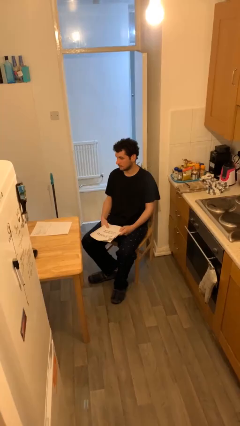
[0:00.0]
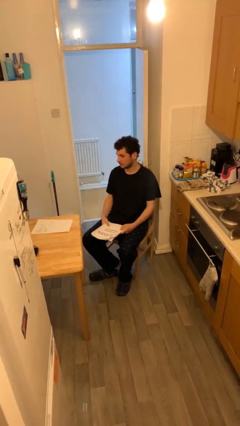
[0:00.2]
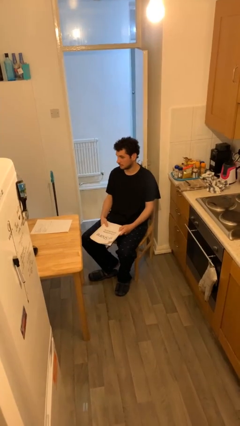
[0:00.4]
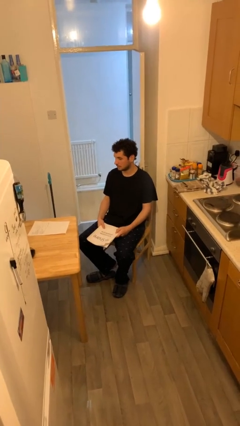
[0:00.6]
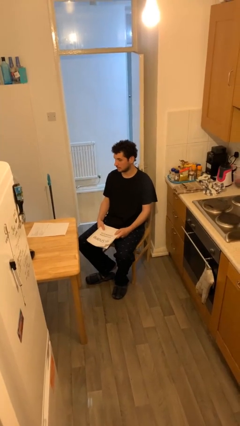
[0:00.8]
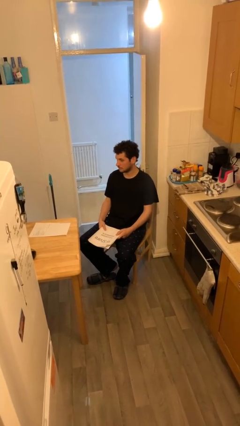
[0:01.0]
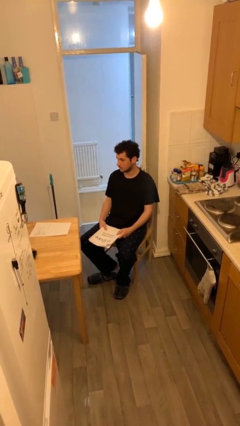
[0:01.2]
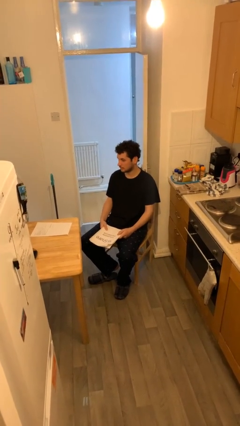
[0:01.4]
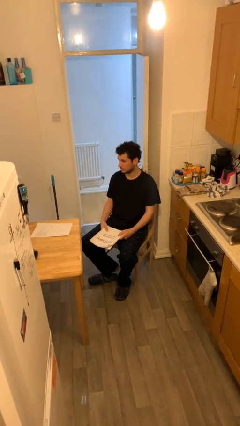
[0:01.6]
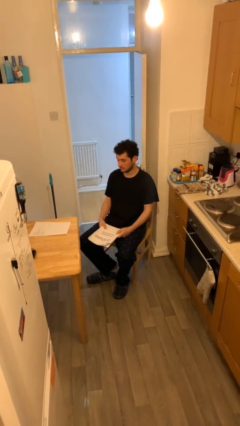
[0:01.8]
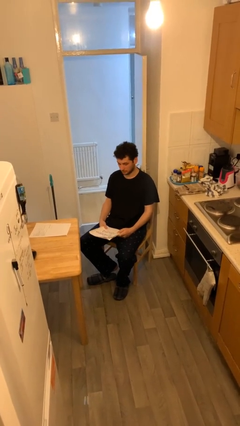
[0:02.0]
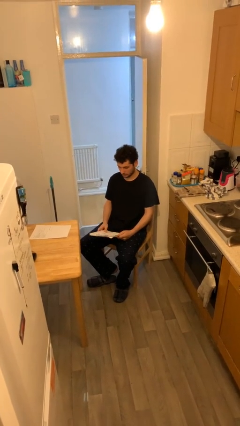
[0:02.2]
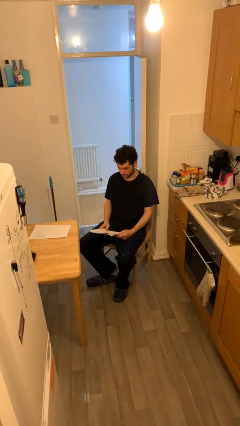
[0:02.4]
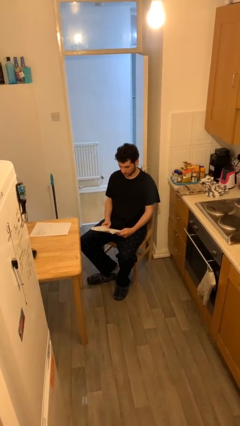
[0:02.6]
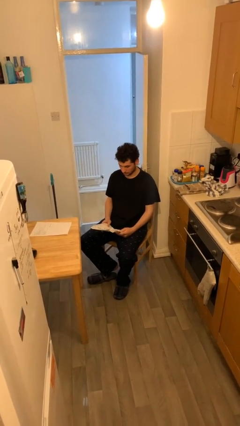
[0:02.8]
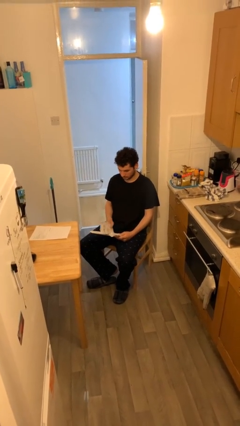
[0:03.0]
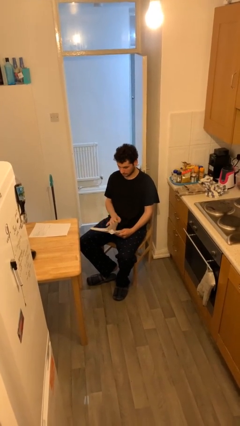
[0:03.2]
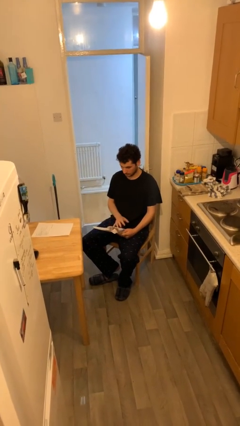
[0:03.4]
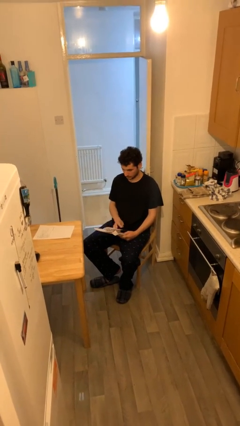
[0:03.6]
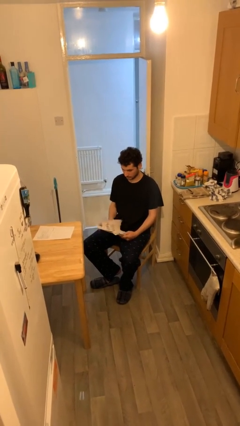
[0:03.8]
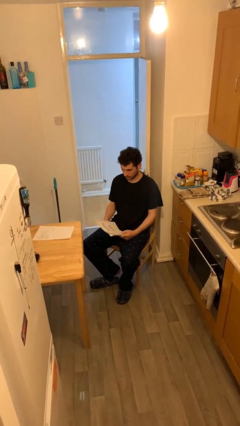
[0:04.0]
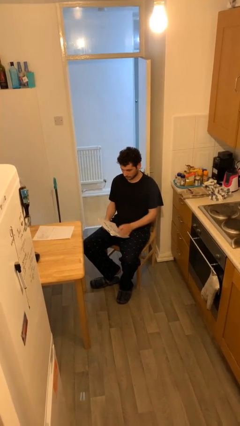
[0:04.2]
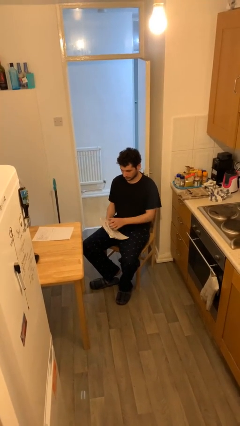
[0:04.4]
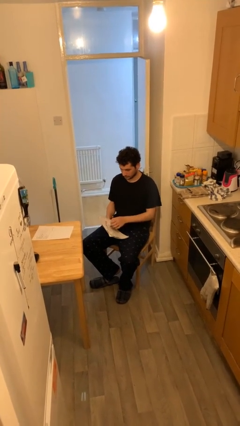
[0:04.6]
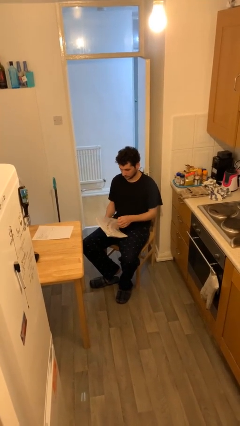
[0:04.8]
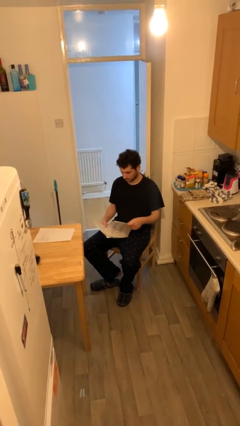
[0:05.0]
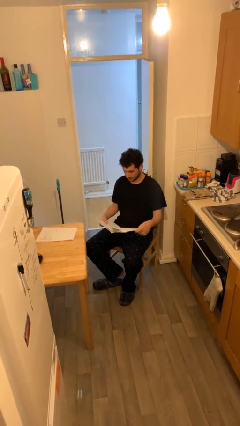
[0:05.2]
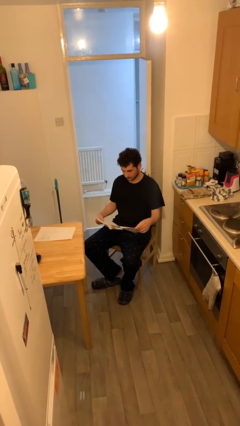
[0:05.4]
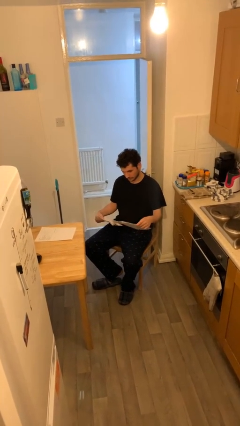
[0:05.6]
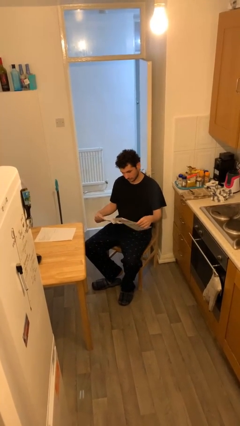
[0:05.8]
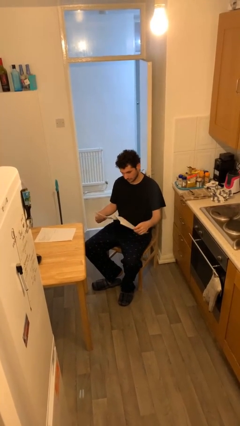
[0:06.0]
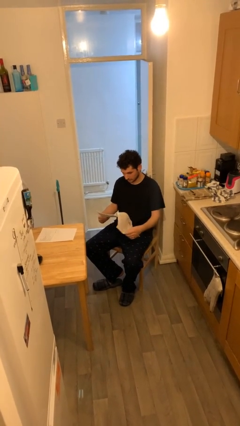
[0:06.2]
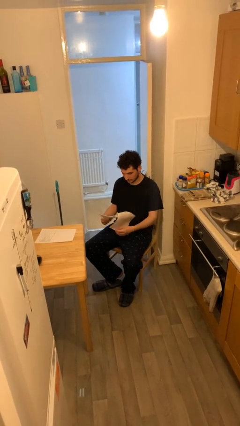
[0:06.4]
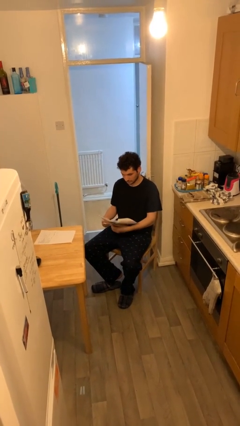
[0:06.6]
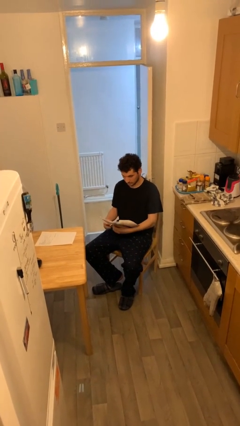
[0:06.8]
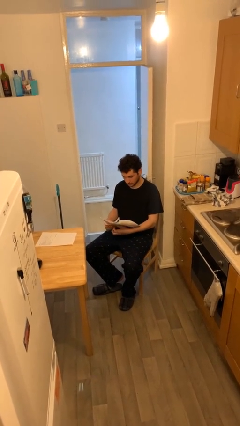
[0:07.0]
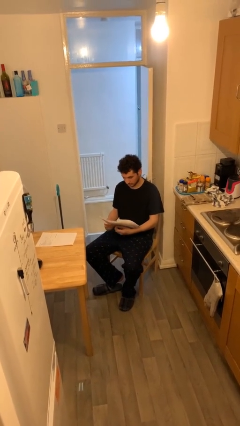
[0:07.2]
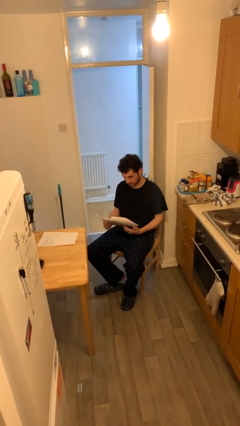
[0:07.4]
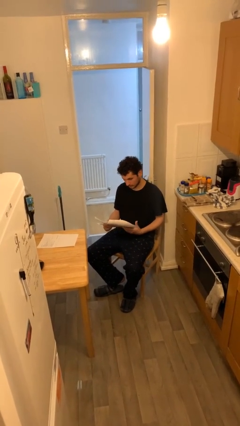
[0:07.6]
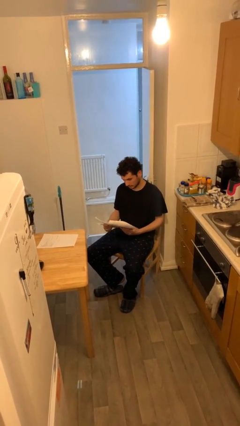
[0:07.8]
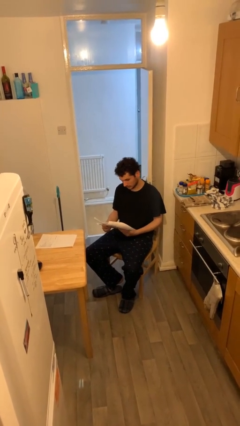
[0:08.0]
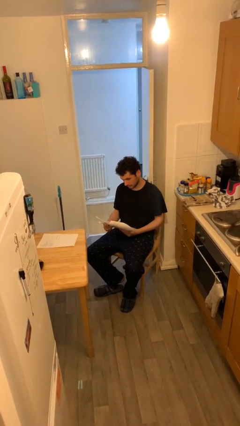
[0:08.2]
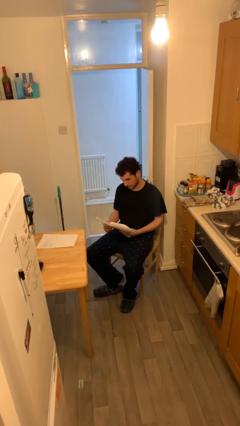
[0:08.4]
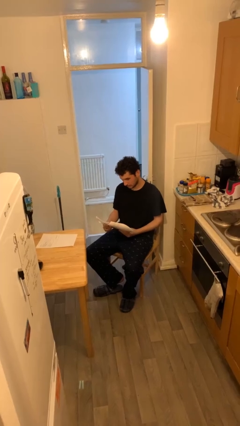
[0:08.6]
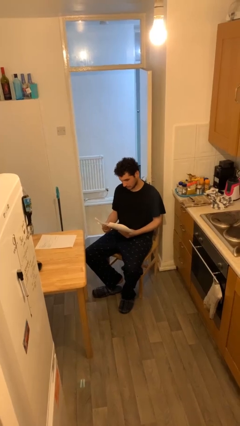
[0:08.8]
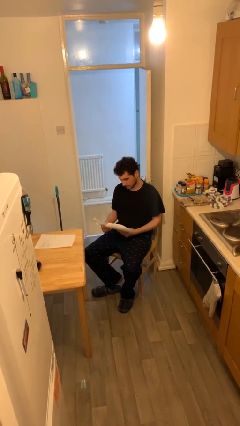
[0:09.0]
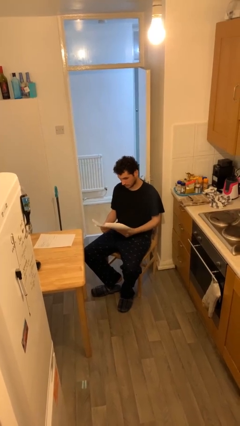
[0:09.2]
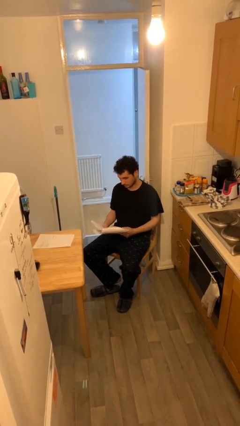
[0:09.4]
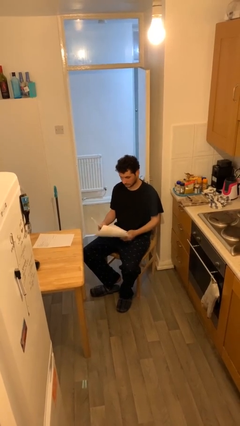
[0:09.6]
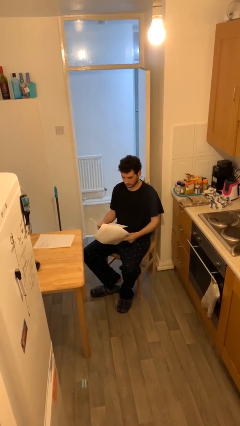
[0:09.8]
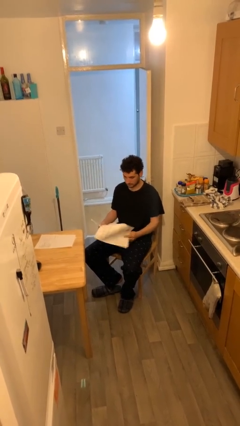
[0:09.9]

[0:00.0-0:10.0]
person reads document

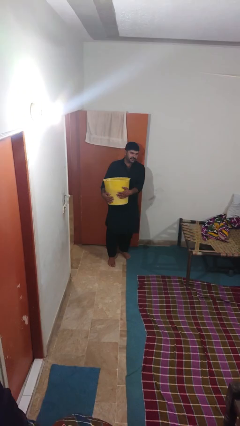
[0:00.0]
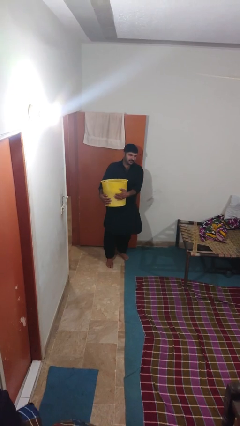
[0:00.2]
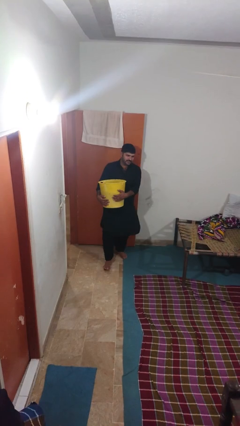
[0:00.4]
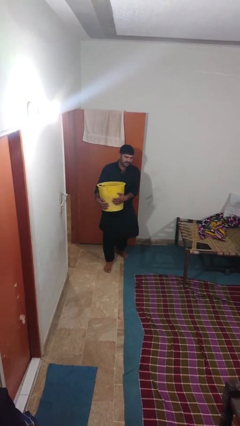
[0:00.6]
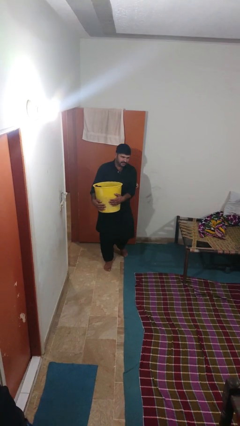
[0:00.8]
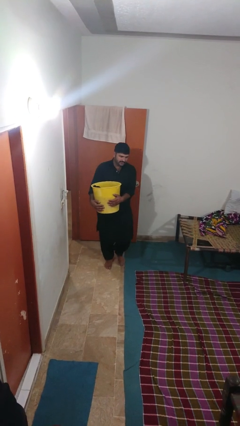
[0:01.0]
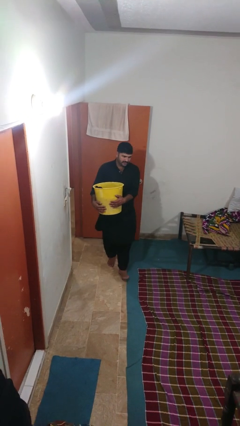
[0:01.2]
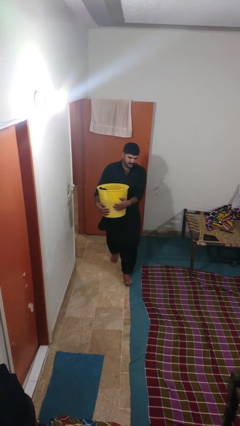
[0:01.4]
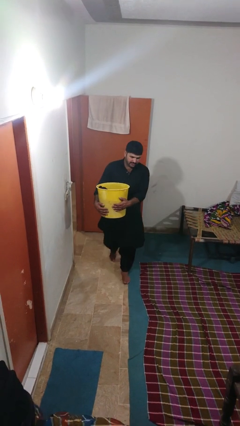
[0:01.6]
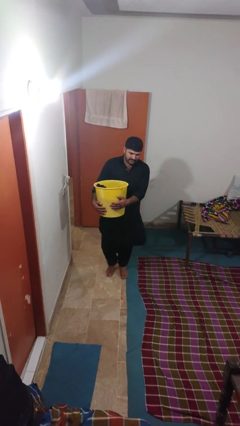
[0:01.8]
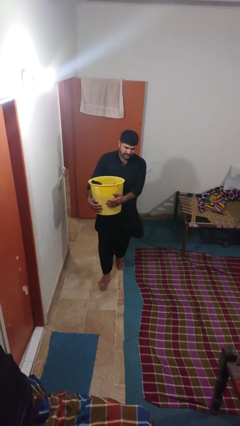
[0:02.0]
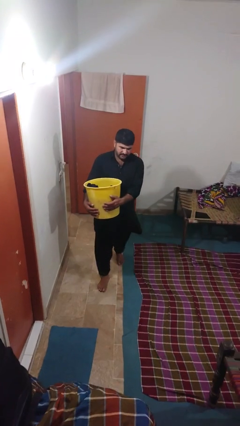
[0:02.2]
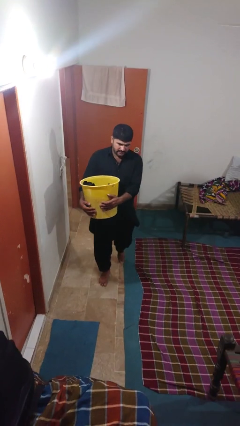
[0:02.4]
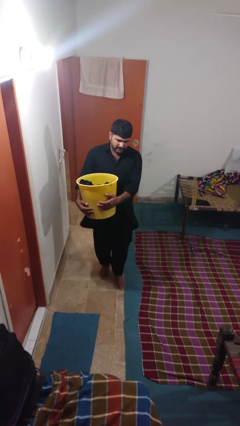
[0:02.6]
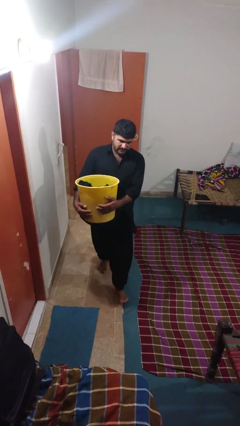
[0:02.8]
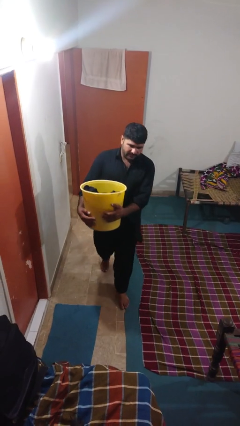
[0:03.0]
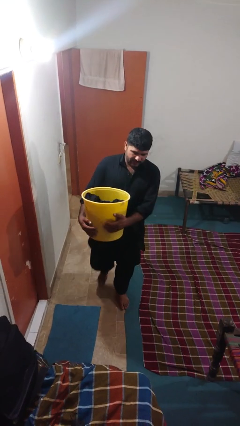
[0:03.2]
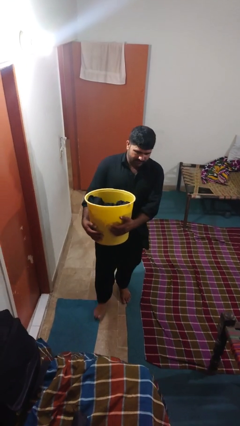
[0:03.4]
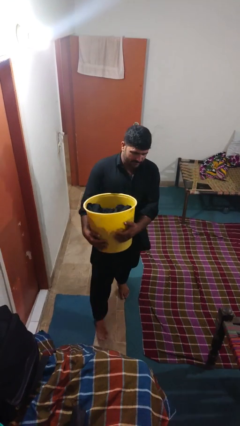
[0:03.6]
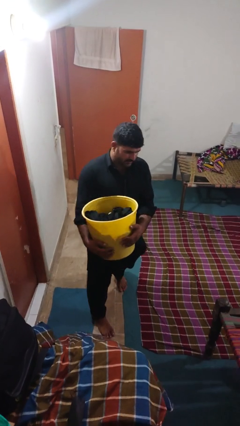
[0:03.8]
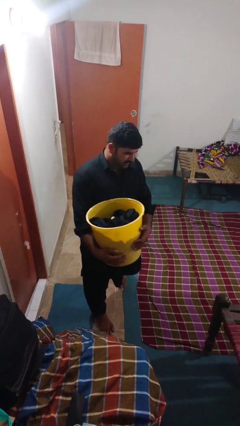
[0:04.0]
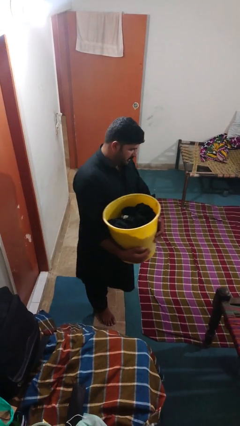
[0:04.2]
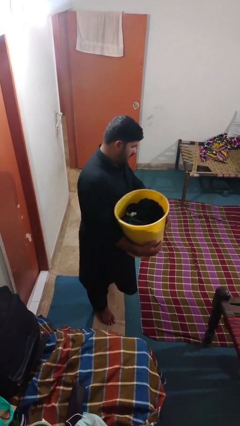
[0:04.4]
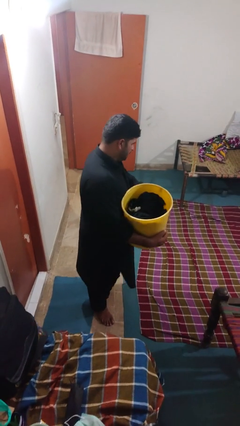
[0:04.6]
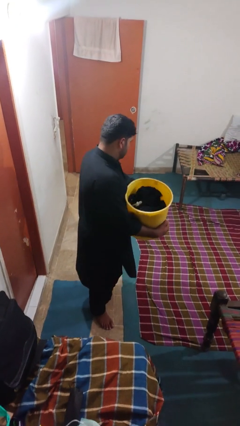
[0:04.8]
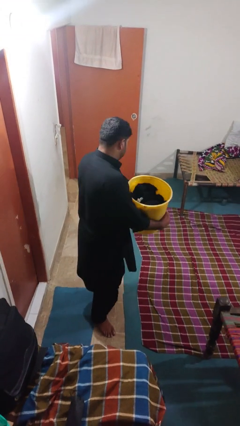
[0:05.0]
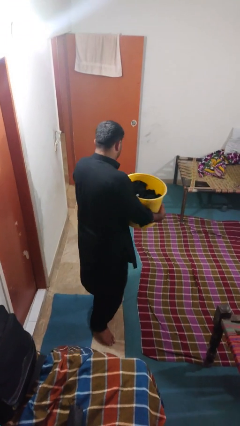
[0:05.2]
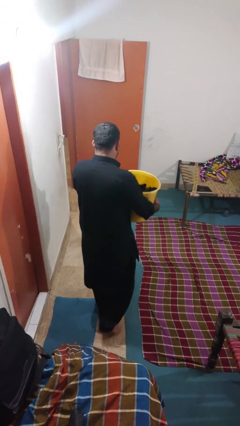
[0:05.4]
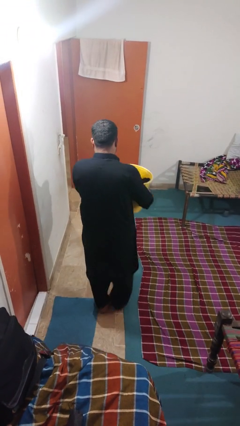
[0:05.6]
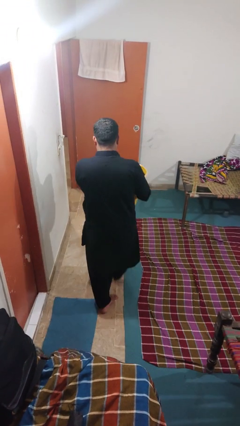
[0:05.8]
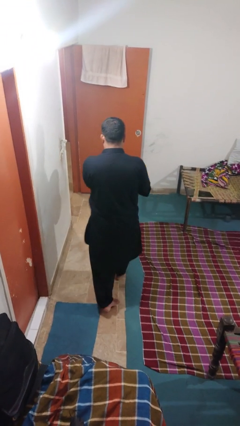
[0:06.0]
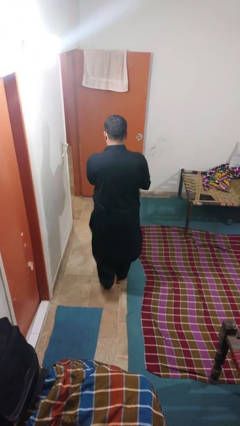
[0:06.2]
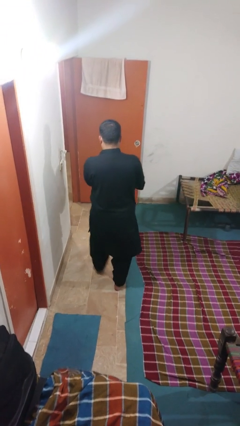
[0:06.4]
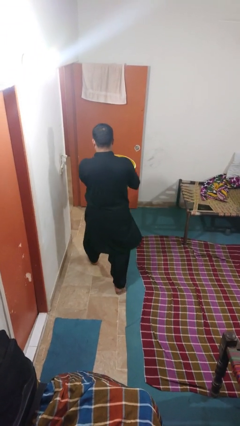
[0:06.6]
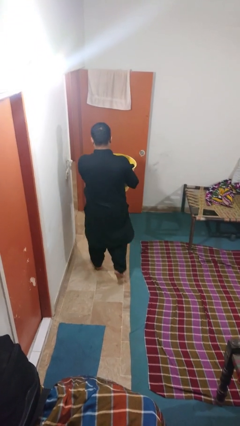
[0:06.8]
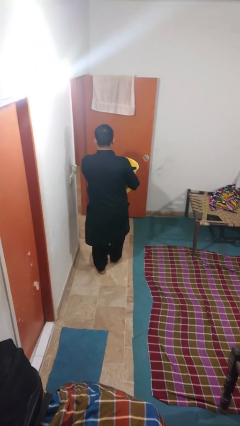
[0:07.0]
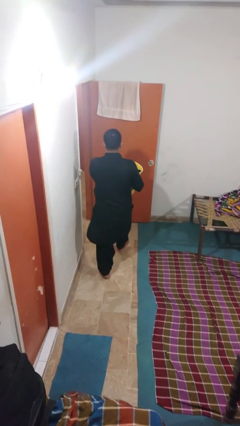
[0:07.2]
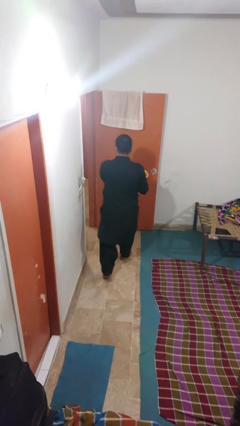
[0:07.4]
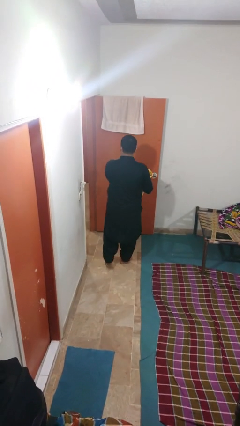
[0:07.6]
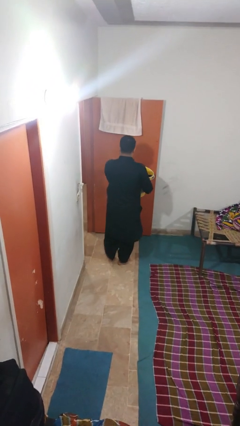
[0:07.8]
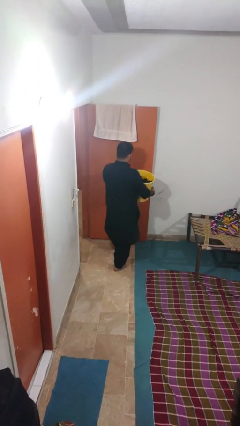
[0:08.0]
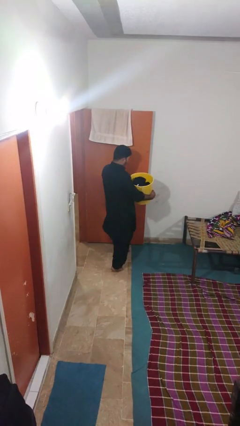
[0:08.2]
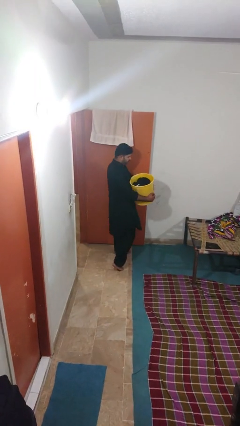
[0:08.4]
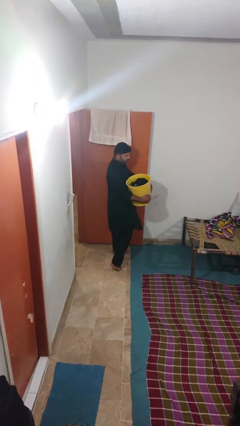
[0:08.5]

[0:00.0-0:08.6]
person carries laundry basket
